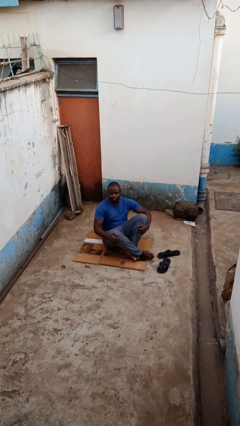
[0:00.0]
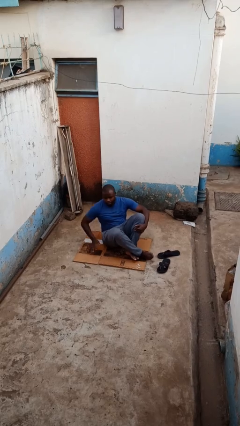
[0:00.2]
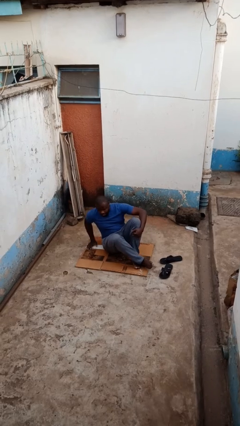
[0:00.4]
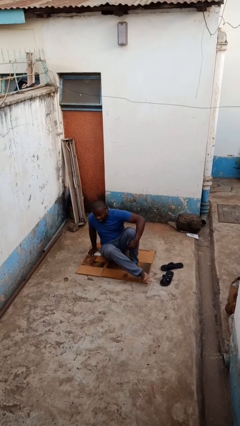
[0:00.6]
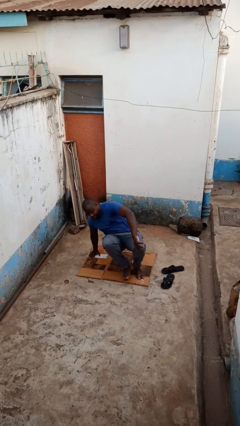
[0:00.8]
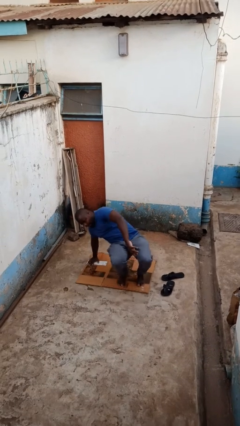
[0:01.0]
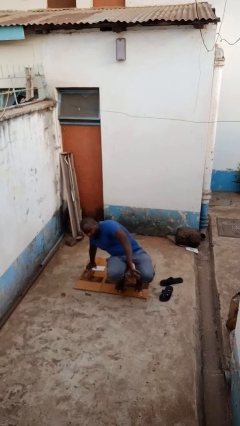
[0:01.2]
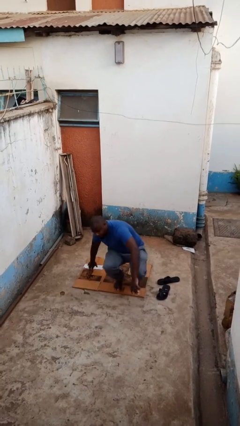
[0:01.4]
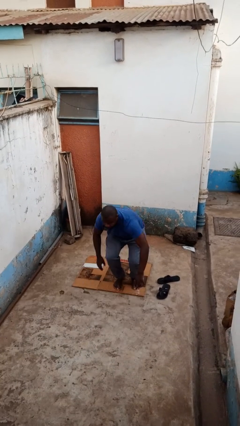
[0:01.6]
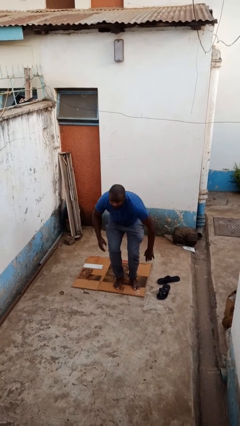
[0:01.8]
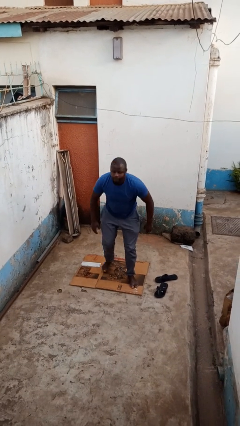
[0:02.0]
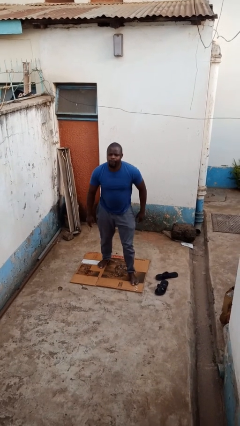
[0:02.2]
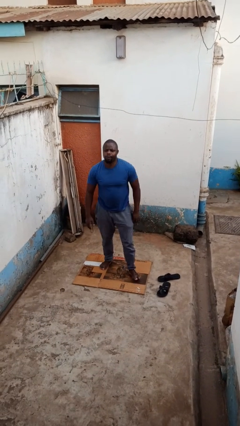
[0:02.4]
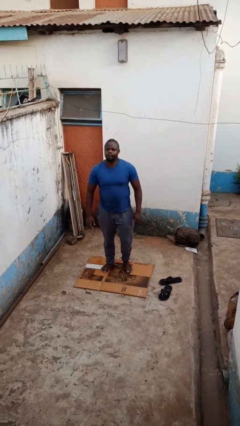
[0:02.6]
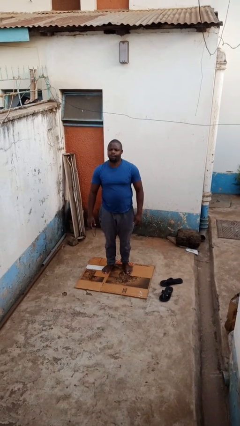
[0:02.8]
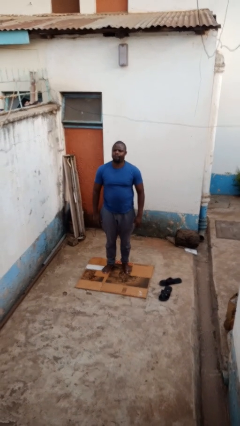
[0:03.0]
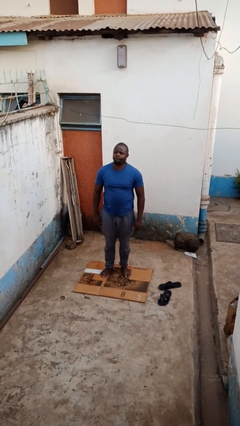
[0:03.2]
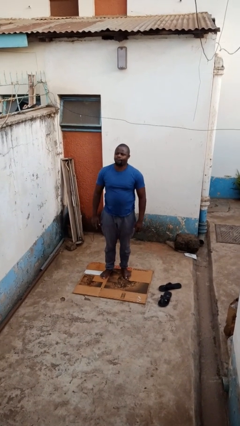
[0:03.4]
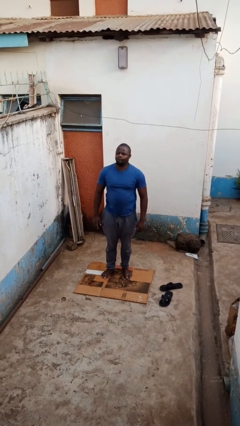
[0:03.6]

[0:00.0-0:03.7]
person stands up from floor

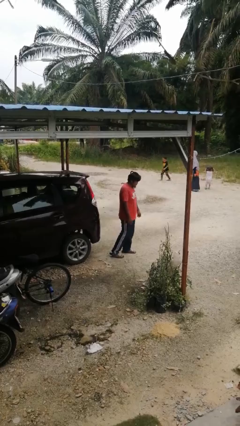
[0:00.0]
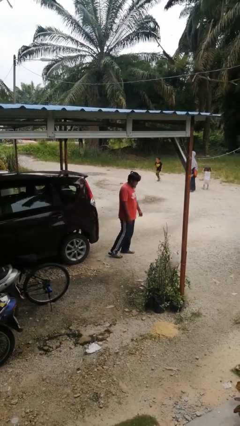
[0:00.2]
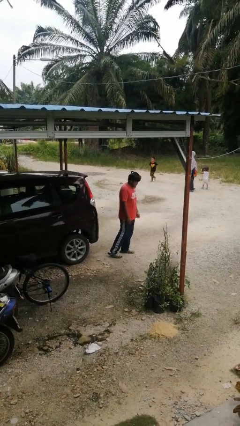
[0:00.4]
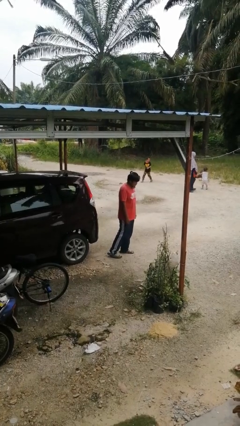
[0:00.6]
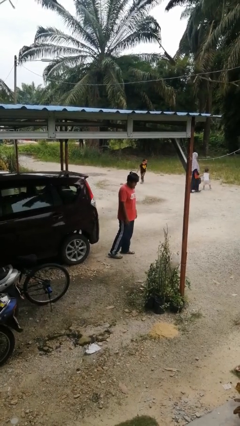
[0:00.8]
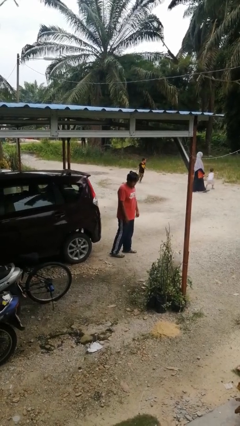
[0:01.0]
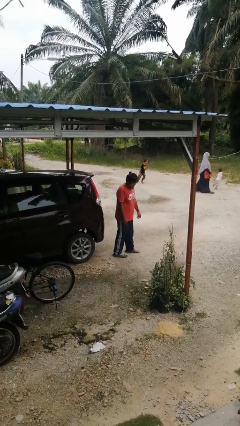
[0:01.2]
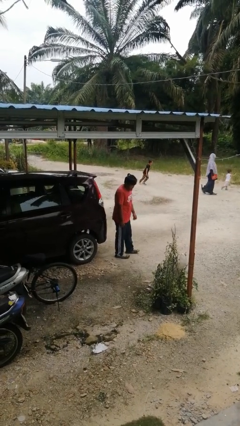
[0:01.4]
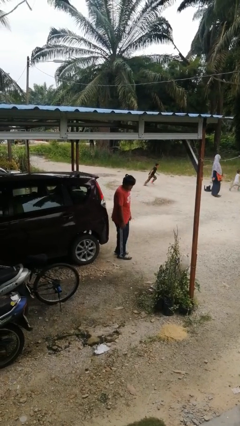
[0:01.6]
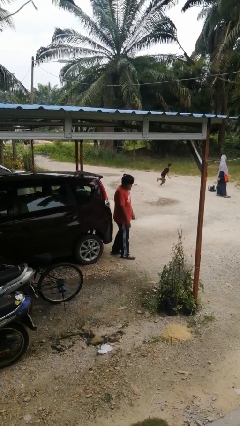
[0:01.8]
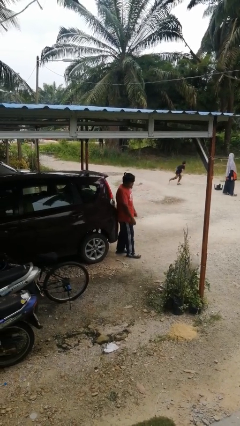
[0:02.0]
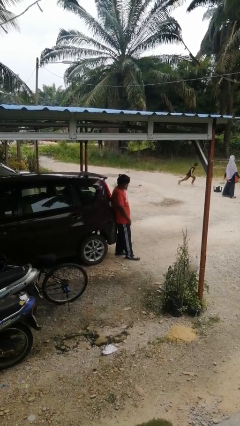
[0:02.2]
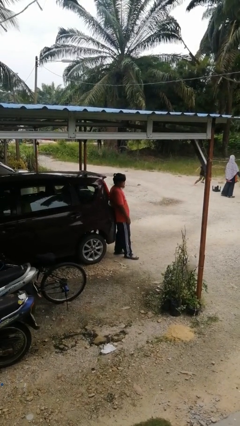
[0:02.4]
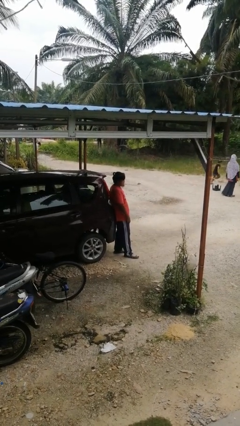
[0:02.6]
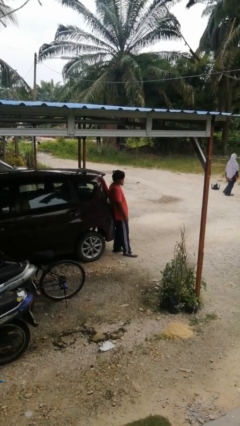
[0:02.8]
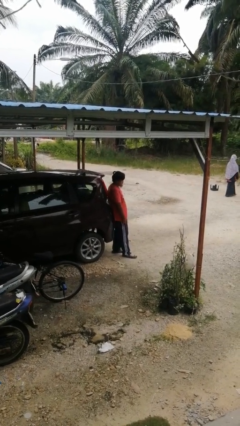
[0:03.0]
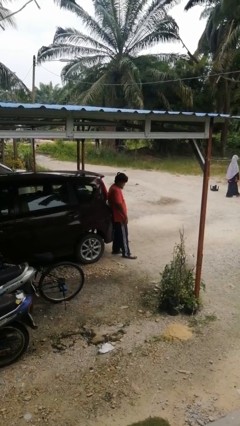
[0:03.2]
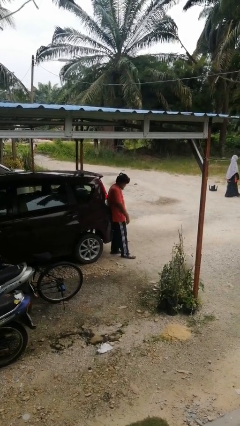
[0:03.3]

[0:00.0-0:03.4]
person leans against car

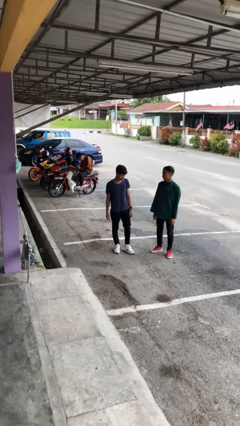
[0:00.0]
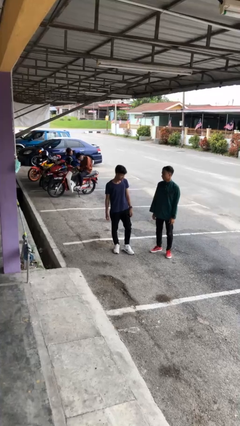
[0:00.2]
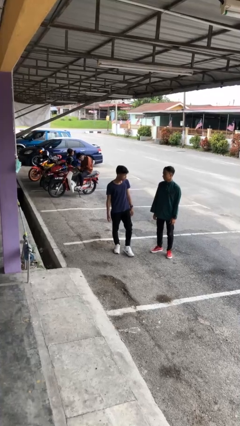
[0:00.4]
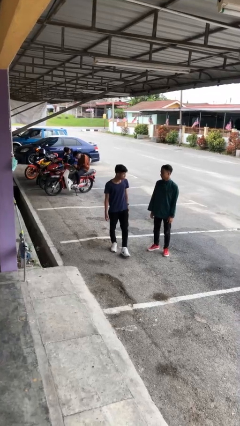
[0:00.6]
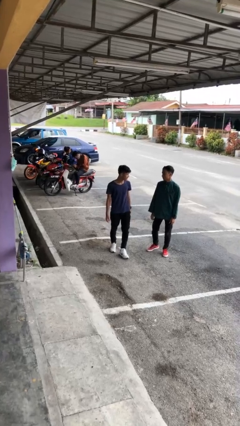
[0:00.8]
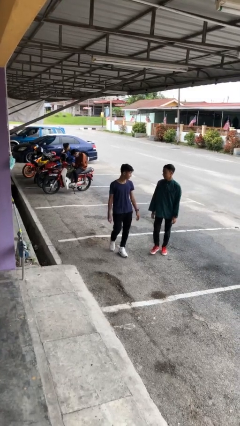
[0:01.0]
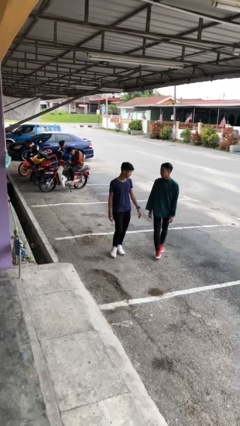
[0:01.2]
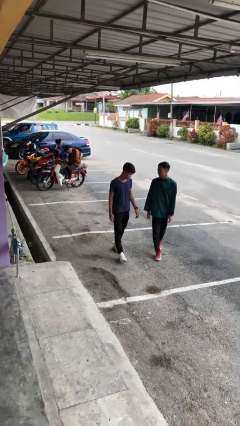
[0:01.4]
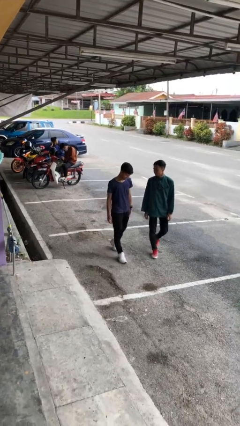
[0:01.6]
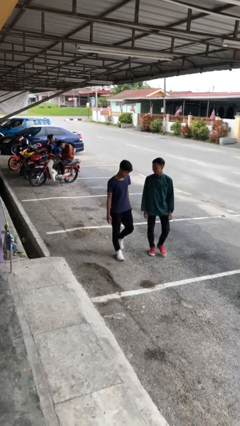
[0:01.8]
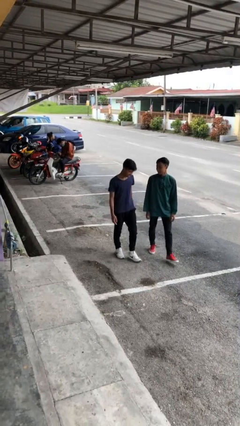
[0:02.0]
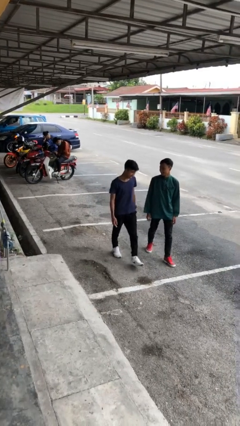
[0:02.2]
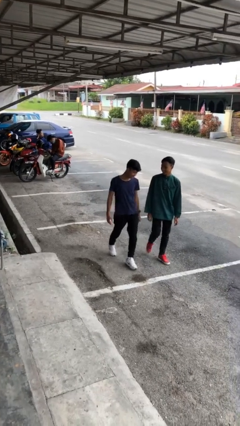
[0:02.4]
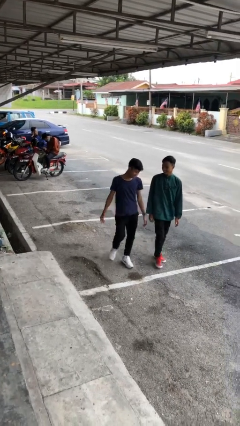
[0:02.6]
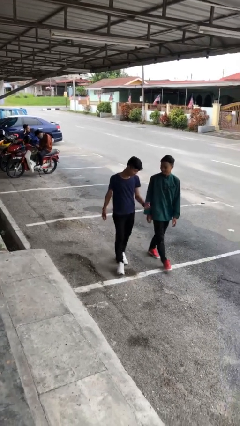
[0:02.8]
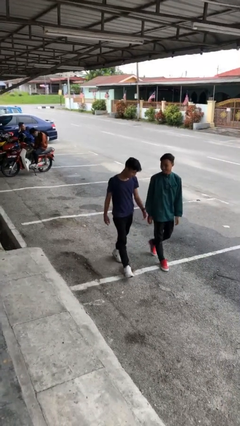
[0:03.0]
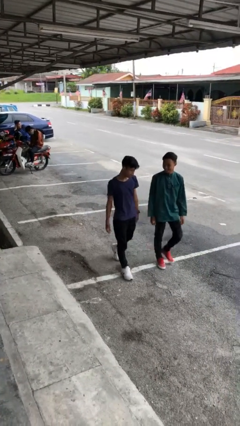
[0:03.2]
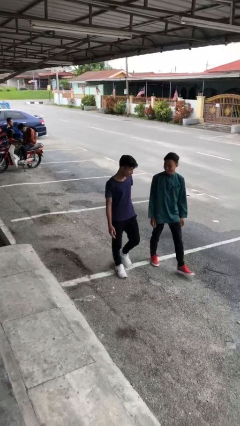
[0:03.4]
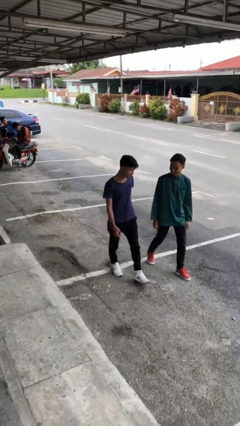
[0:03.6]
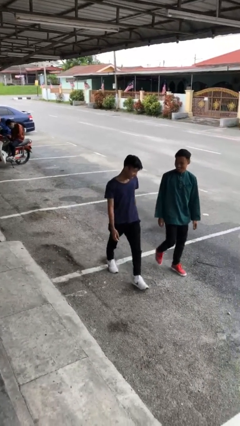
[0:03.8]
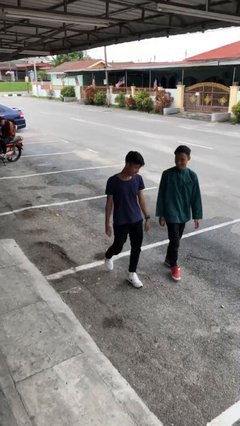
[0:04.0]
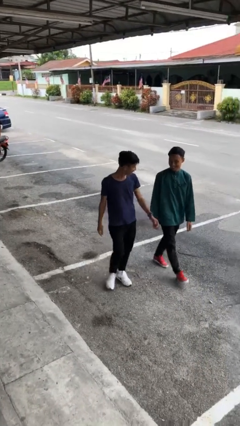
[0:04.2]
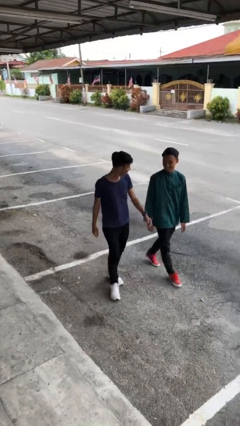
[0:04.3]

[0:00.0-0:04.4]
person talks to person

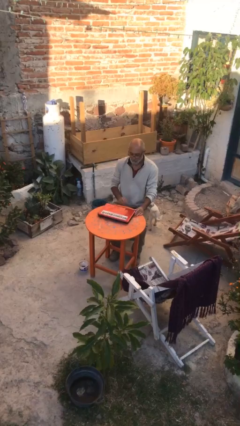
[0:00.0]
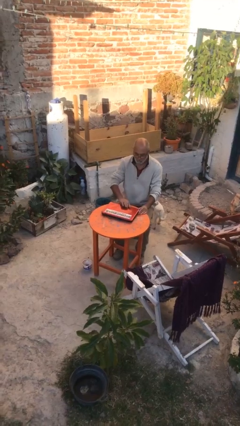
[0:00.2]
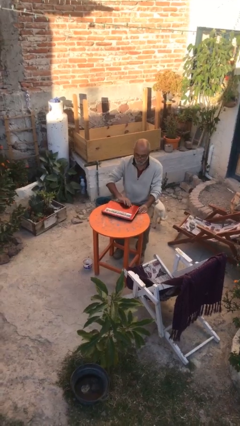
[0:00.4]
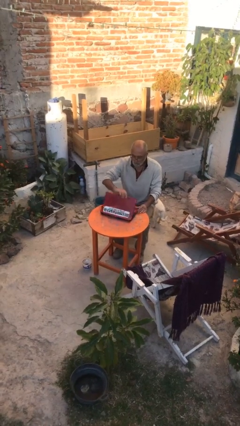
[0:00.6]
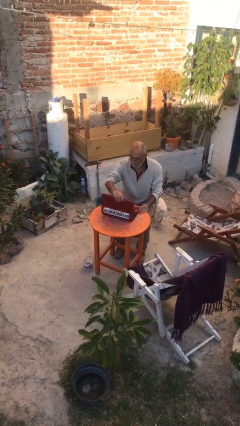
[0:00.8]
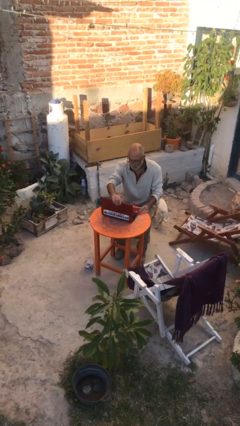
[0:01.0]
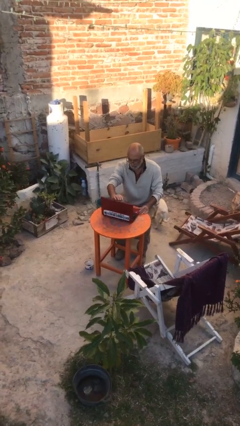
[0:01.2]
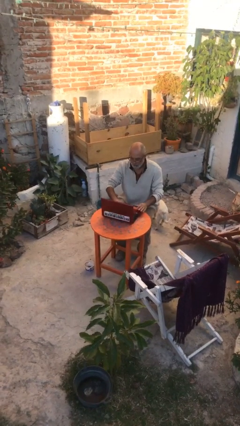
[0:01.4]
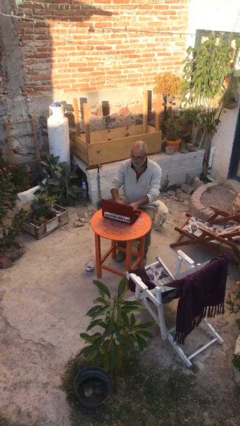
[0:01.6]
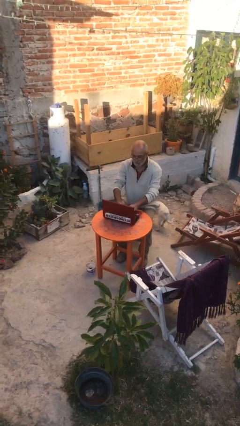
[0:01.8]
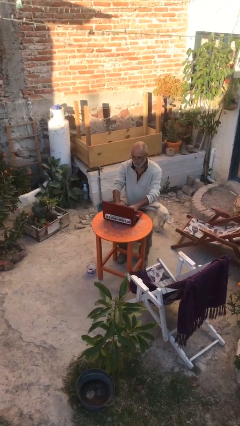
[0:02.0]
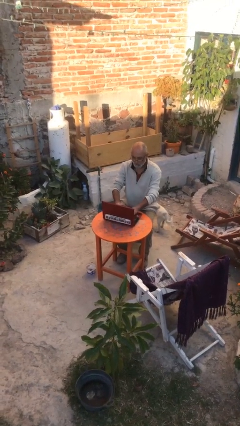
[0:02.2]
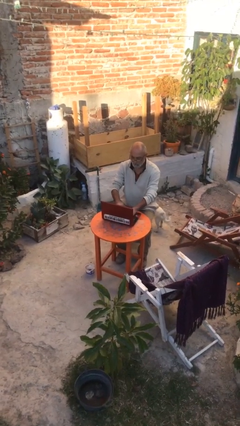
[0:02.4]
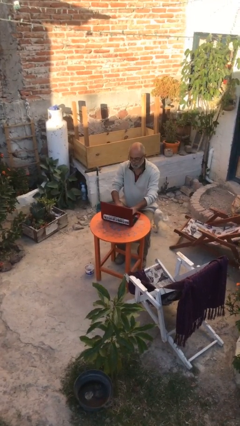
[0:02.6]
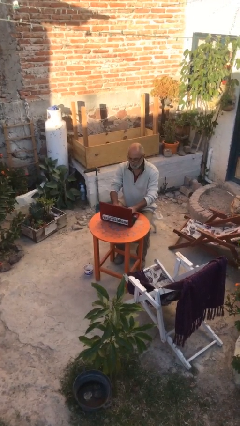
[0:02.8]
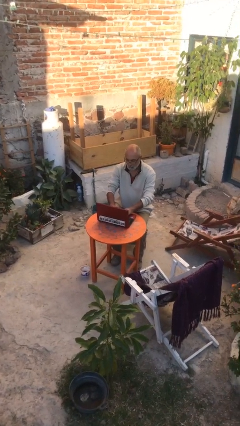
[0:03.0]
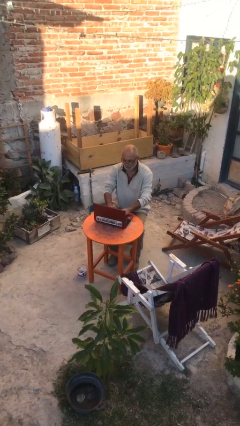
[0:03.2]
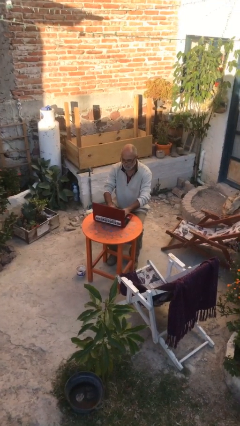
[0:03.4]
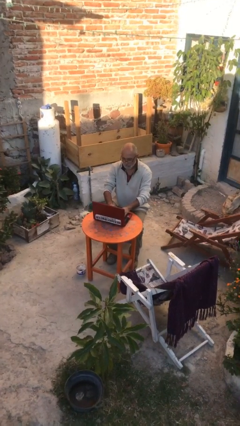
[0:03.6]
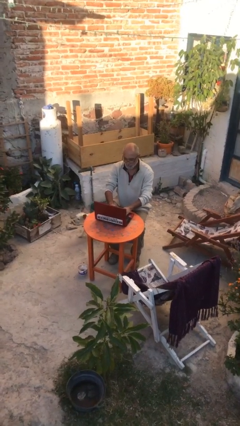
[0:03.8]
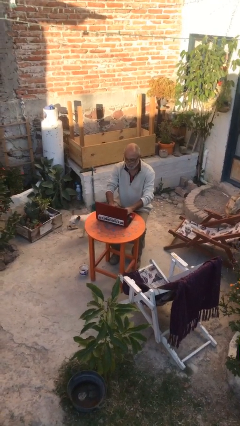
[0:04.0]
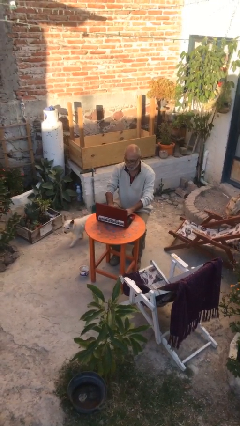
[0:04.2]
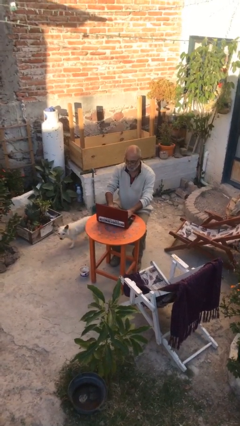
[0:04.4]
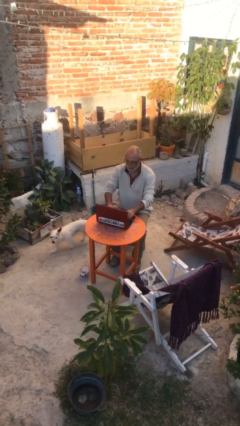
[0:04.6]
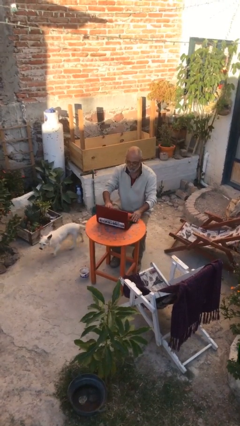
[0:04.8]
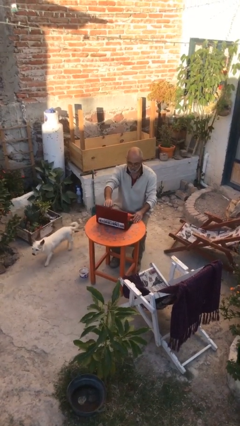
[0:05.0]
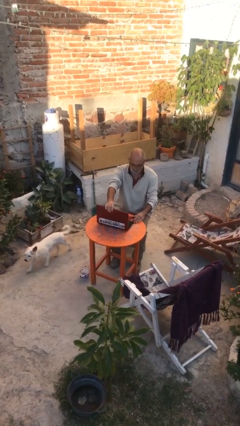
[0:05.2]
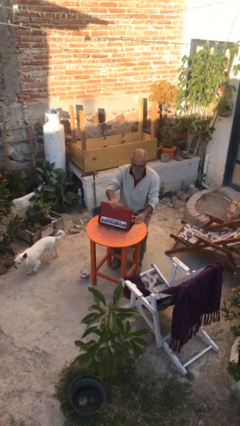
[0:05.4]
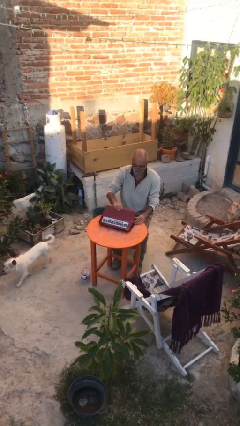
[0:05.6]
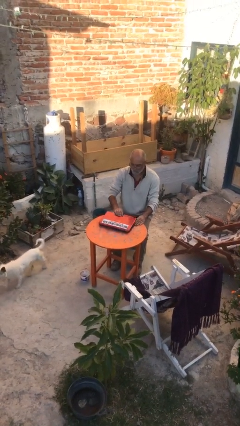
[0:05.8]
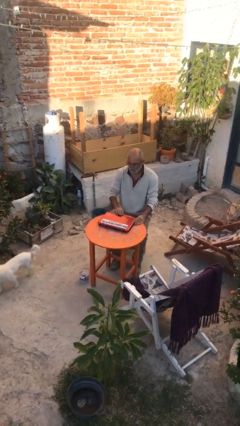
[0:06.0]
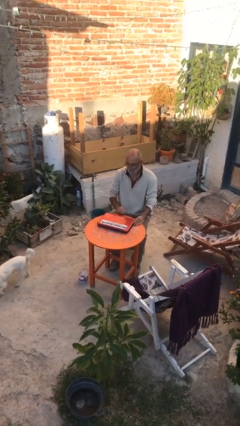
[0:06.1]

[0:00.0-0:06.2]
person interacts with laptop
